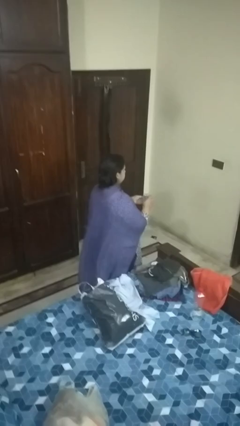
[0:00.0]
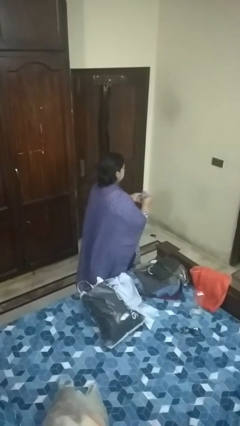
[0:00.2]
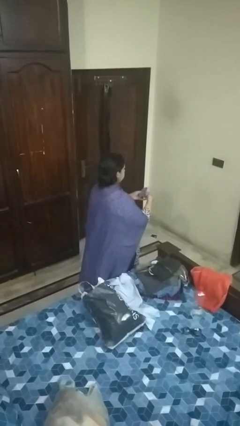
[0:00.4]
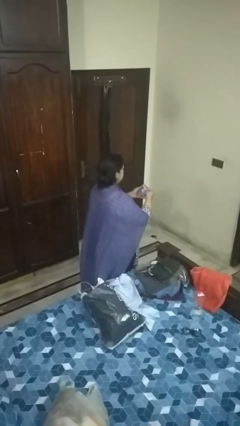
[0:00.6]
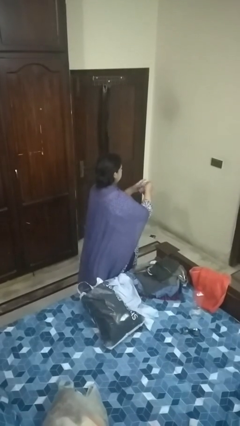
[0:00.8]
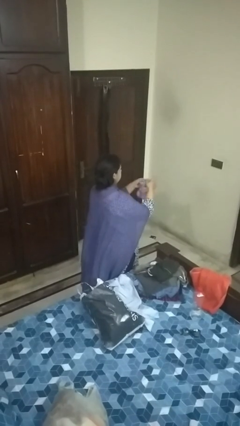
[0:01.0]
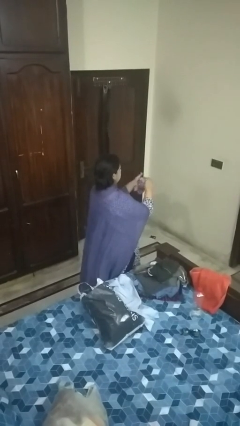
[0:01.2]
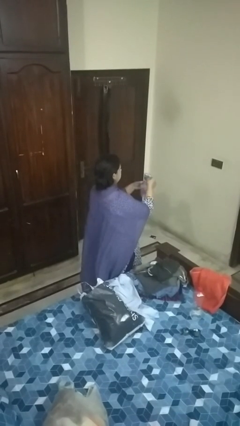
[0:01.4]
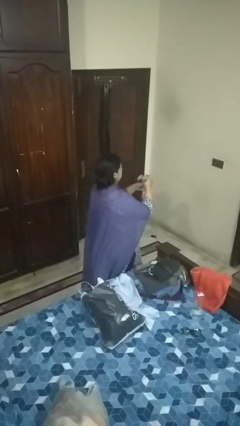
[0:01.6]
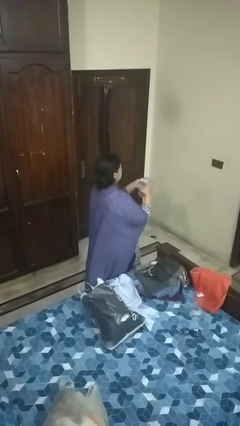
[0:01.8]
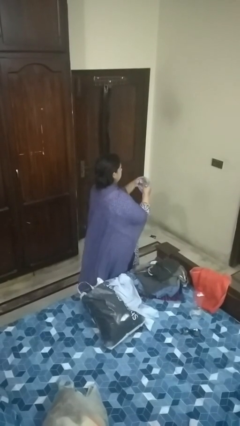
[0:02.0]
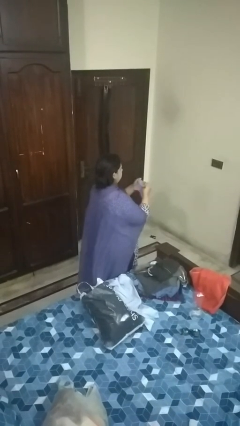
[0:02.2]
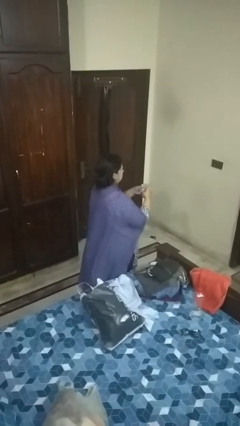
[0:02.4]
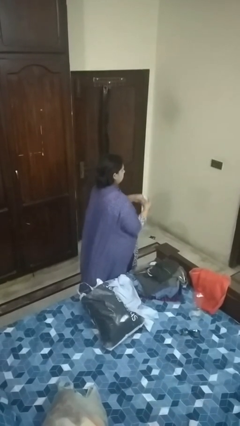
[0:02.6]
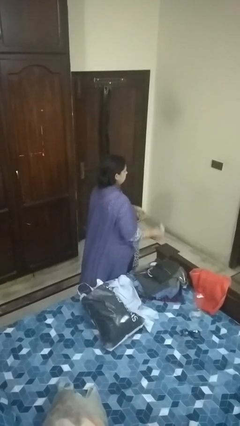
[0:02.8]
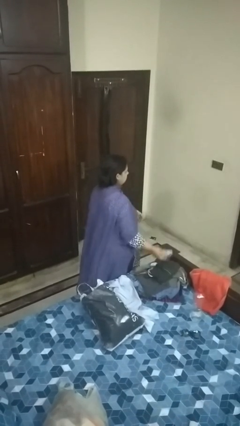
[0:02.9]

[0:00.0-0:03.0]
person folds socks

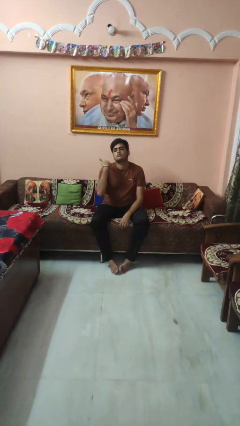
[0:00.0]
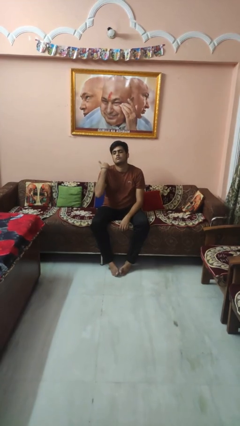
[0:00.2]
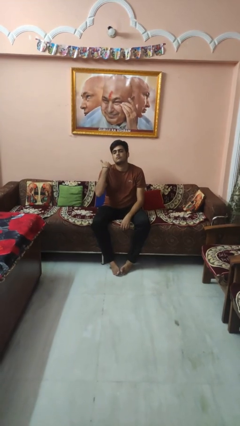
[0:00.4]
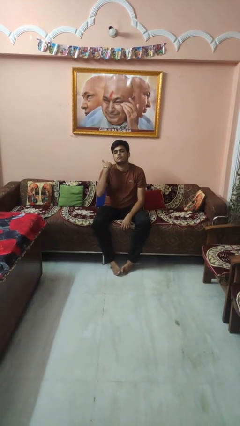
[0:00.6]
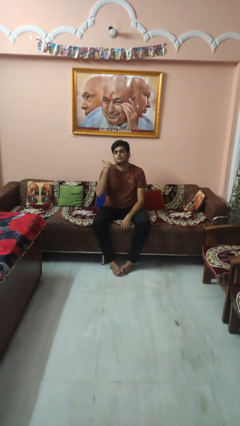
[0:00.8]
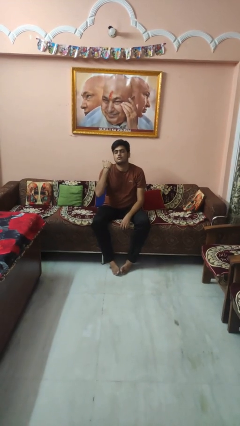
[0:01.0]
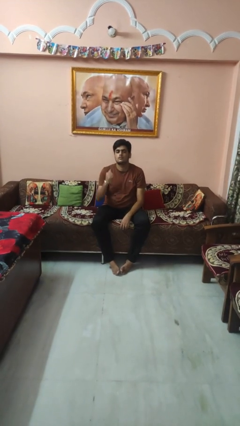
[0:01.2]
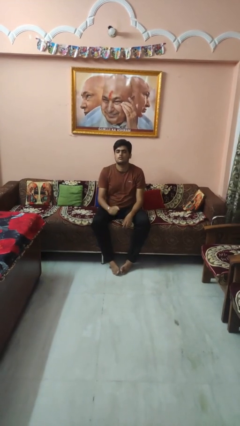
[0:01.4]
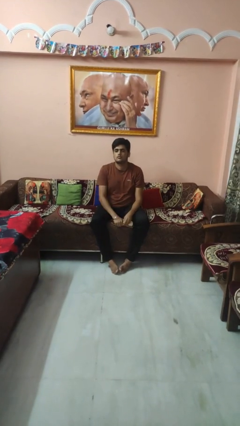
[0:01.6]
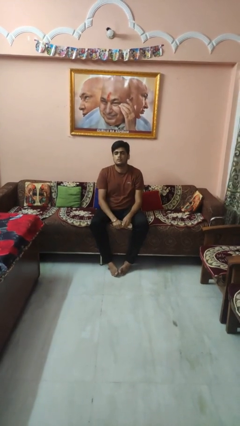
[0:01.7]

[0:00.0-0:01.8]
person gestures cut

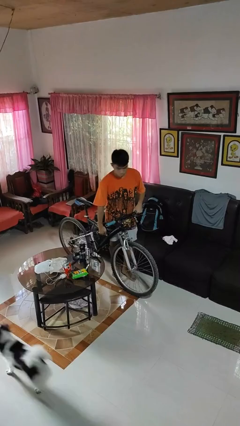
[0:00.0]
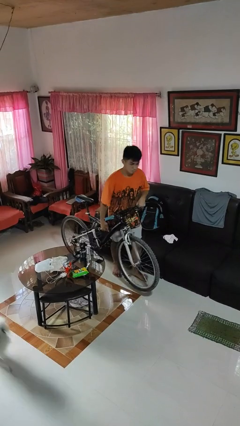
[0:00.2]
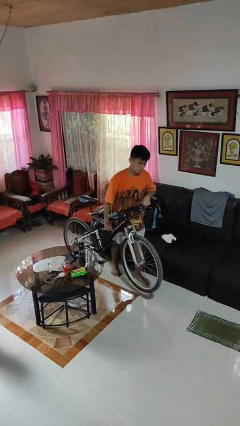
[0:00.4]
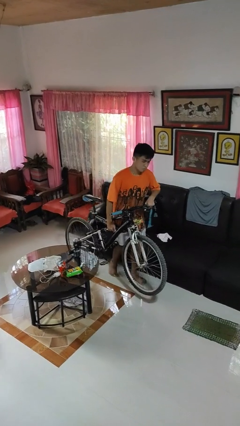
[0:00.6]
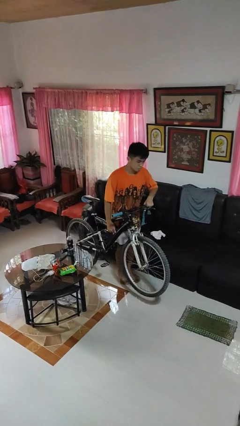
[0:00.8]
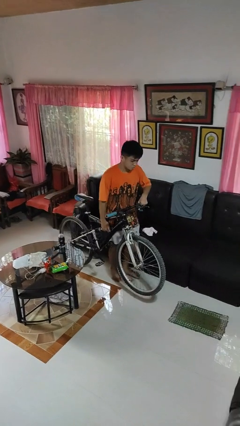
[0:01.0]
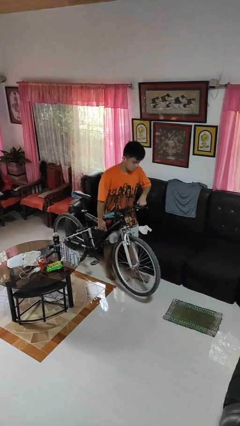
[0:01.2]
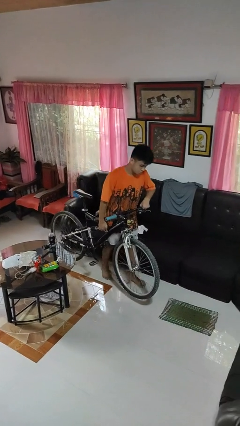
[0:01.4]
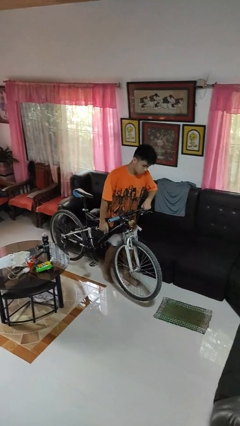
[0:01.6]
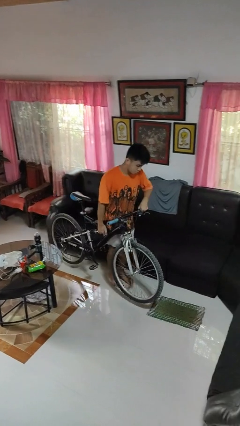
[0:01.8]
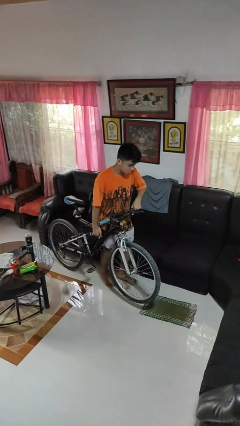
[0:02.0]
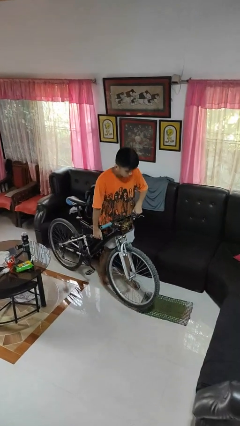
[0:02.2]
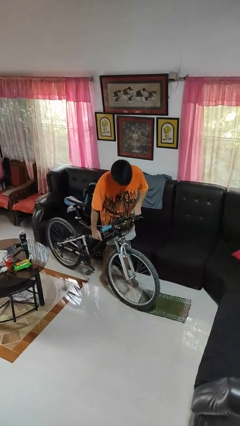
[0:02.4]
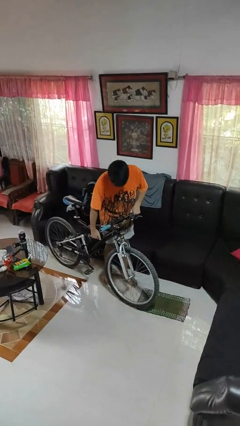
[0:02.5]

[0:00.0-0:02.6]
person carries bicycle

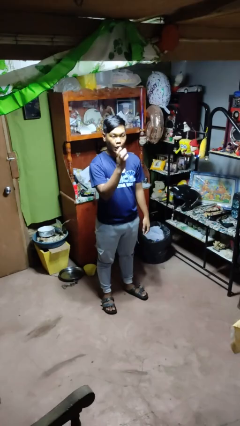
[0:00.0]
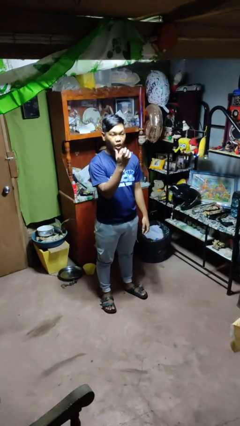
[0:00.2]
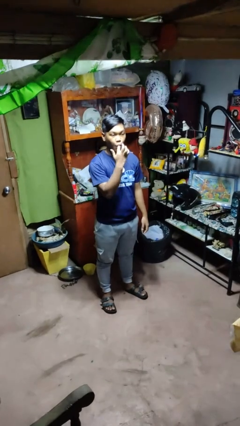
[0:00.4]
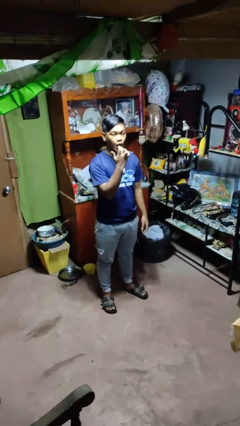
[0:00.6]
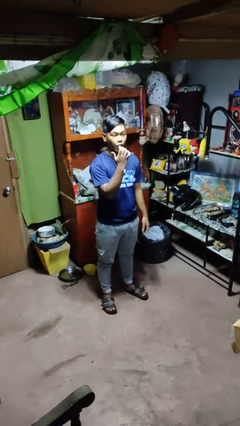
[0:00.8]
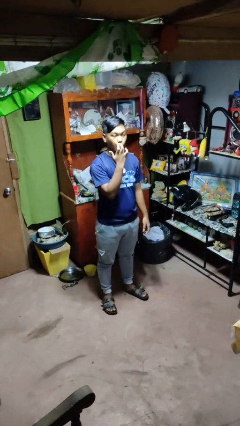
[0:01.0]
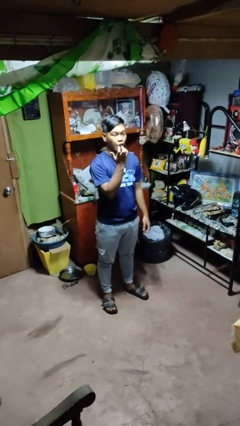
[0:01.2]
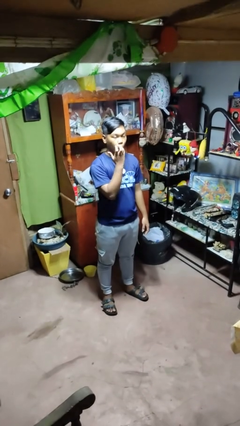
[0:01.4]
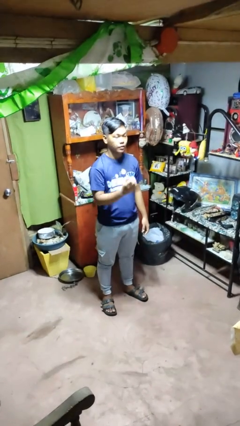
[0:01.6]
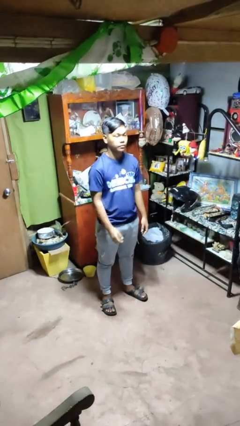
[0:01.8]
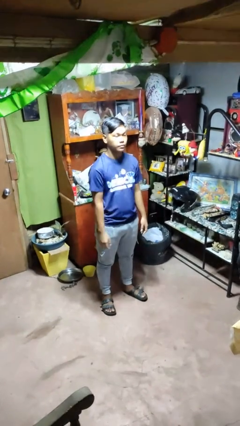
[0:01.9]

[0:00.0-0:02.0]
person licks fingers

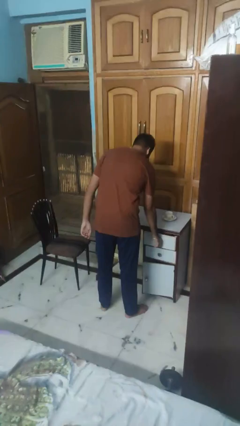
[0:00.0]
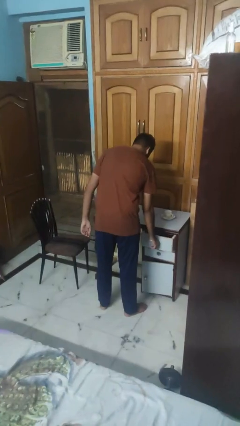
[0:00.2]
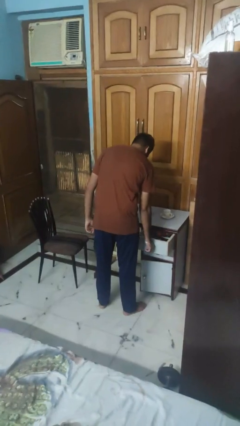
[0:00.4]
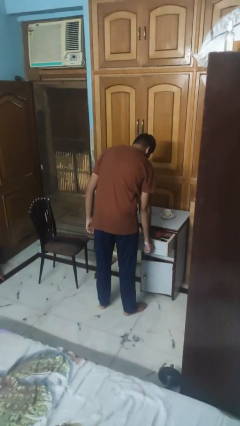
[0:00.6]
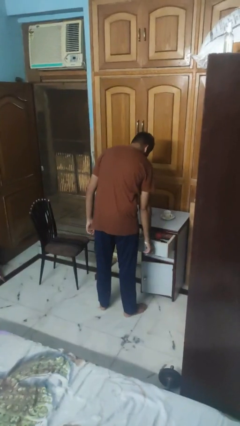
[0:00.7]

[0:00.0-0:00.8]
person opens kitchen drawer

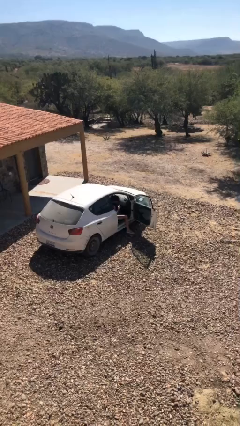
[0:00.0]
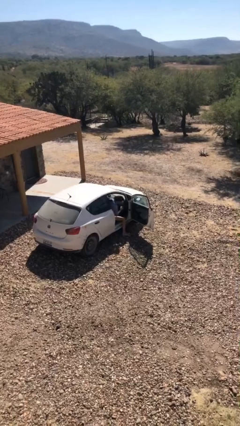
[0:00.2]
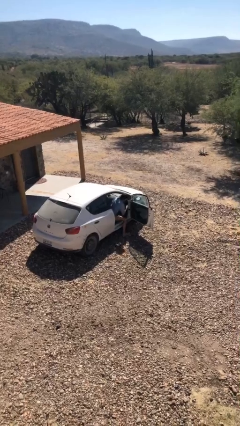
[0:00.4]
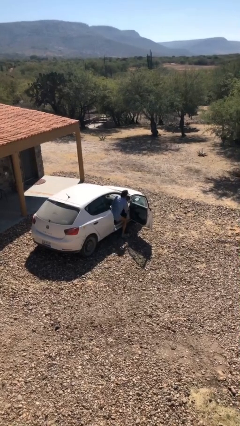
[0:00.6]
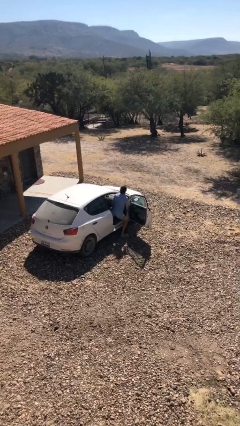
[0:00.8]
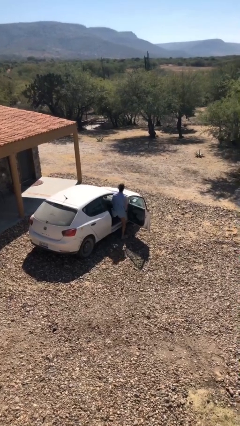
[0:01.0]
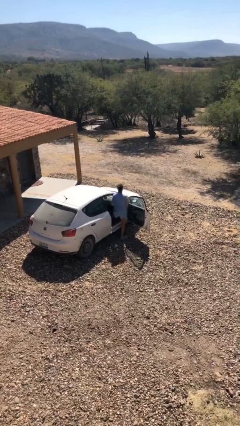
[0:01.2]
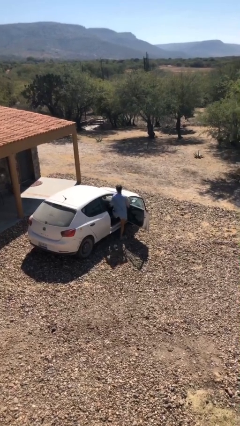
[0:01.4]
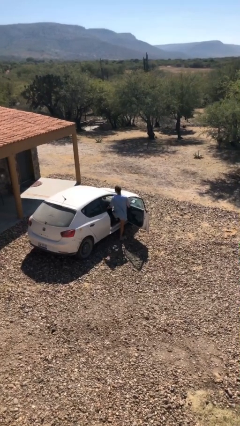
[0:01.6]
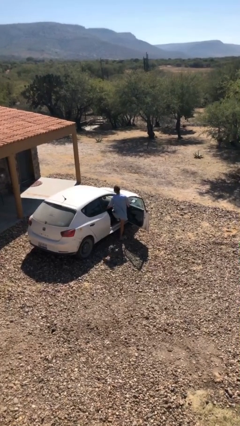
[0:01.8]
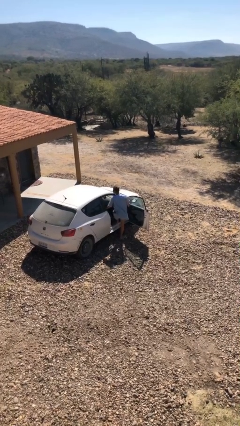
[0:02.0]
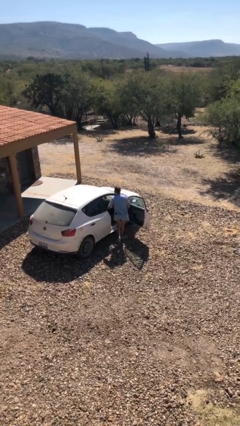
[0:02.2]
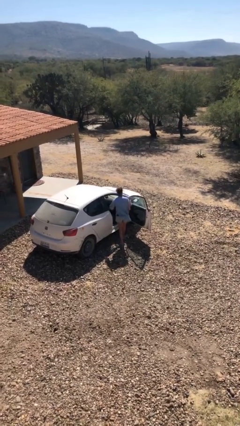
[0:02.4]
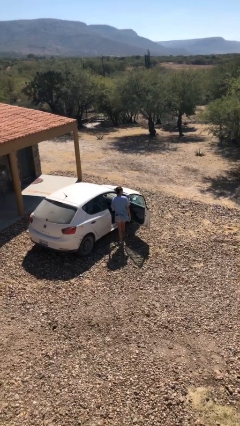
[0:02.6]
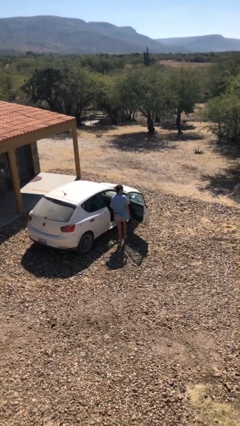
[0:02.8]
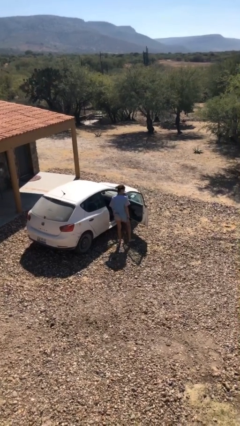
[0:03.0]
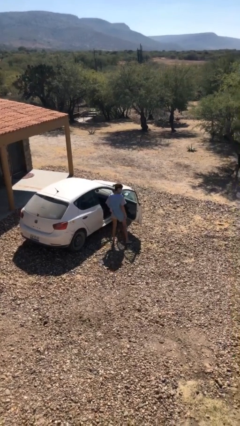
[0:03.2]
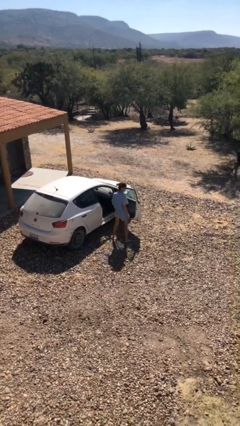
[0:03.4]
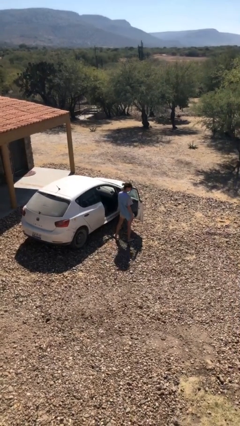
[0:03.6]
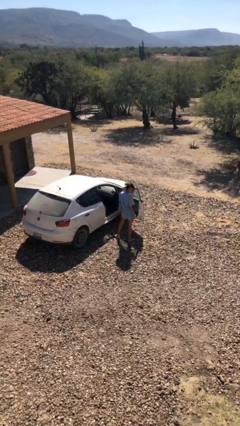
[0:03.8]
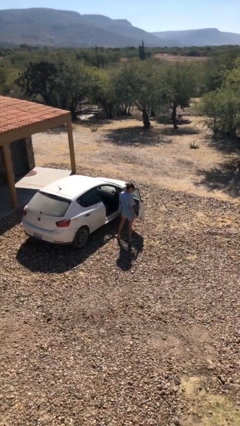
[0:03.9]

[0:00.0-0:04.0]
person exits car

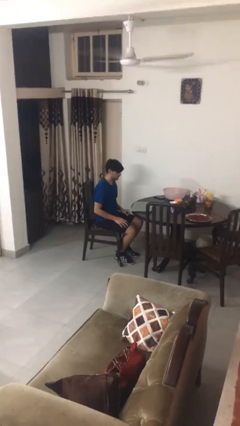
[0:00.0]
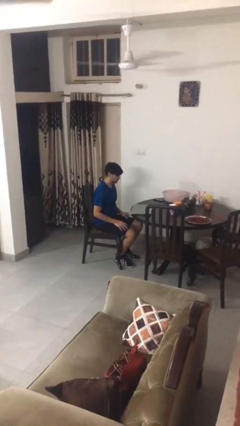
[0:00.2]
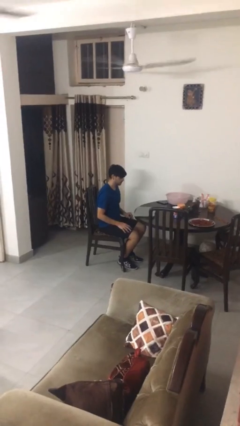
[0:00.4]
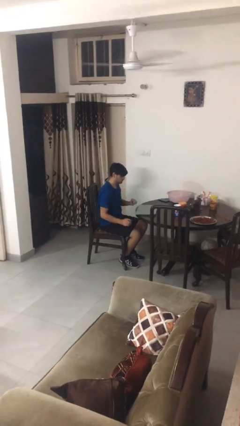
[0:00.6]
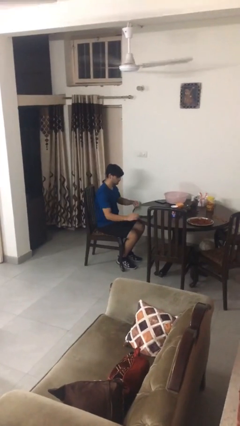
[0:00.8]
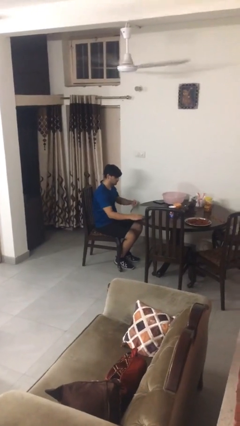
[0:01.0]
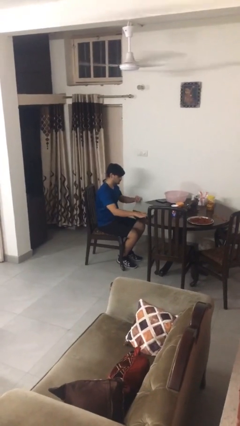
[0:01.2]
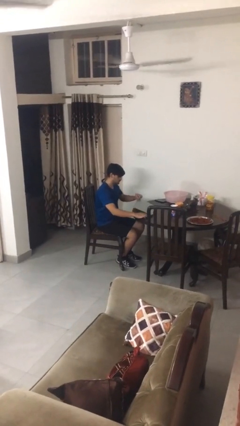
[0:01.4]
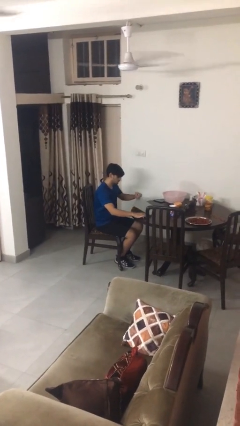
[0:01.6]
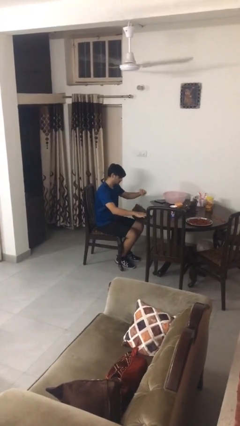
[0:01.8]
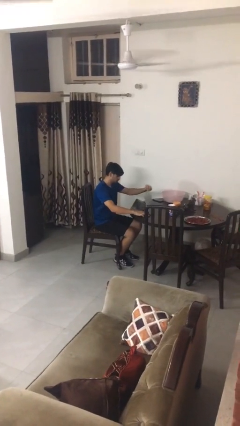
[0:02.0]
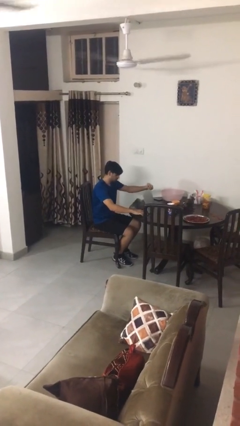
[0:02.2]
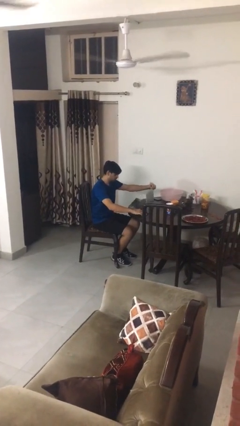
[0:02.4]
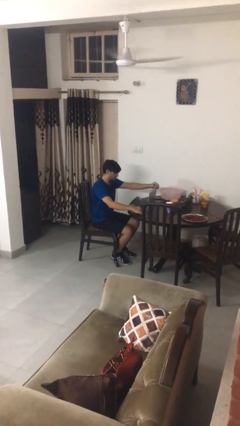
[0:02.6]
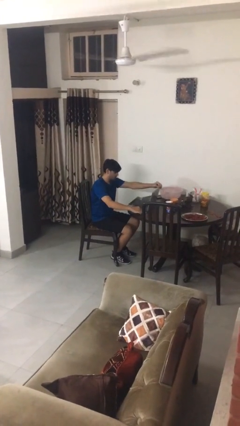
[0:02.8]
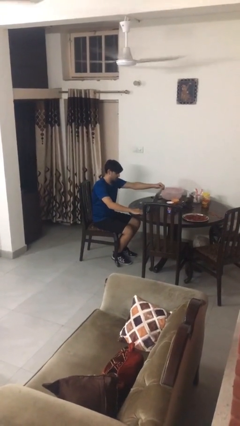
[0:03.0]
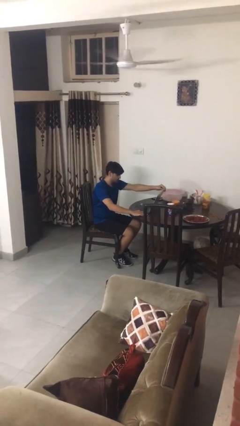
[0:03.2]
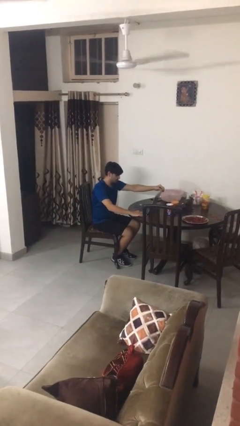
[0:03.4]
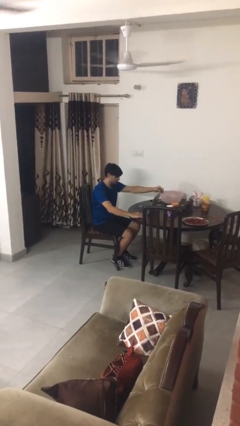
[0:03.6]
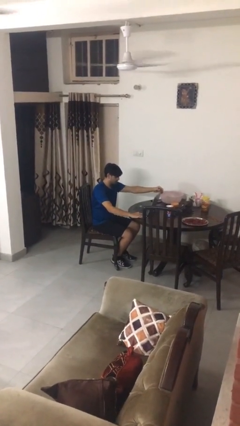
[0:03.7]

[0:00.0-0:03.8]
person opens laptop
